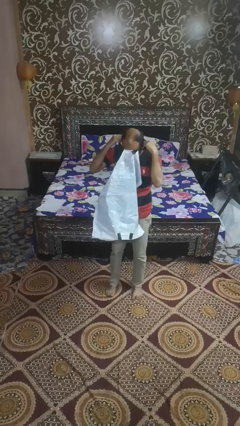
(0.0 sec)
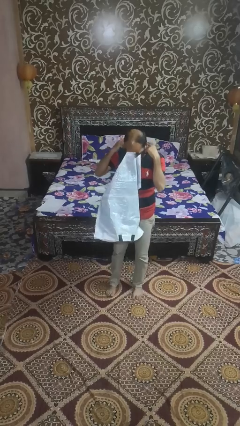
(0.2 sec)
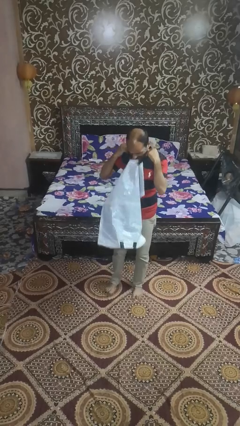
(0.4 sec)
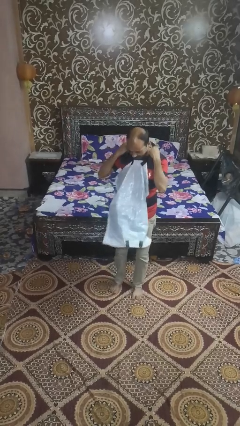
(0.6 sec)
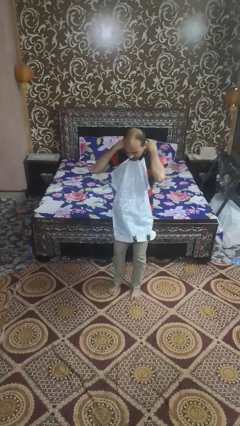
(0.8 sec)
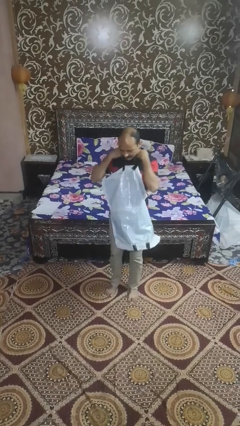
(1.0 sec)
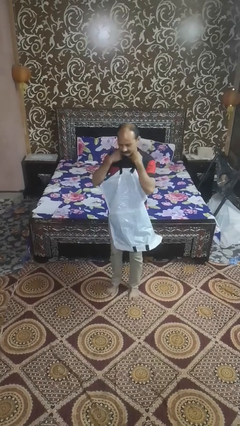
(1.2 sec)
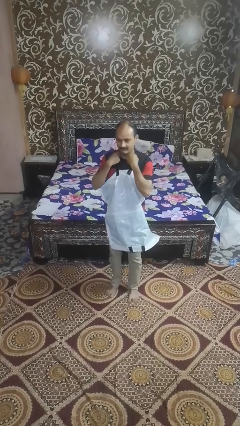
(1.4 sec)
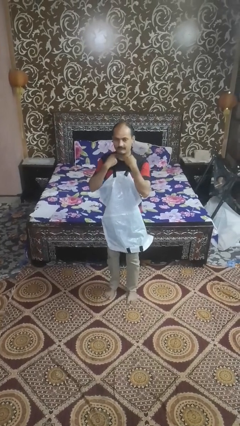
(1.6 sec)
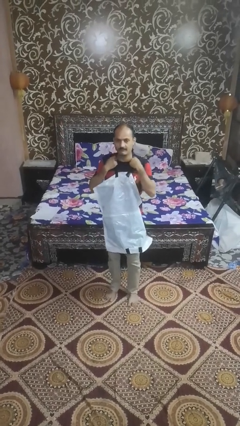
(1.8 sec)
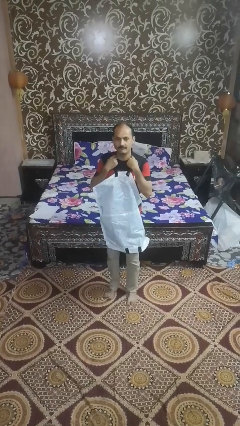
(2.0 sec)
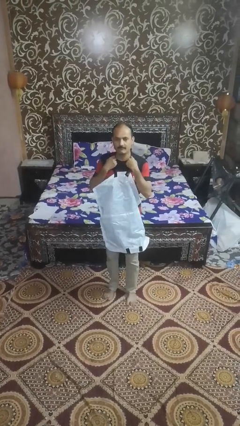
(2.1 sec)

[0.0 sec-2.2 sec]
person tears paper

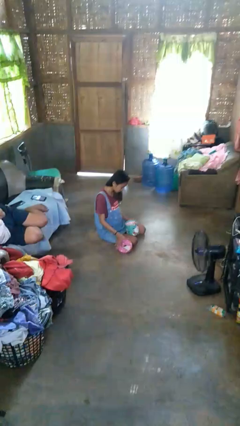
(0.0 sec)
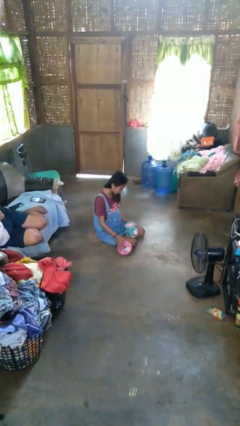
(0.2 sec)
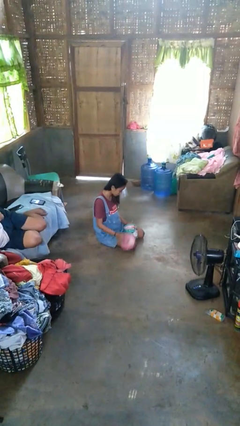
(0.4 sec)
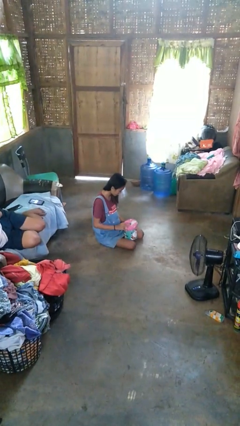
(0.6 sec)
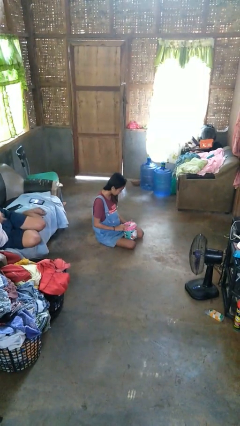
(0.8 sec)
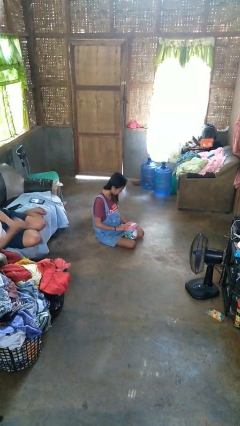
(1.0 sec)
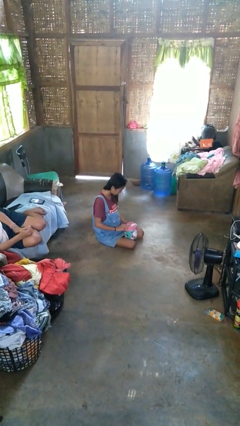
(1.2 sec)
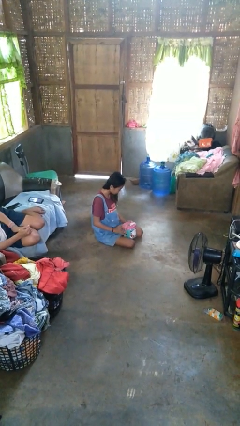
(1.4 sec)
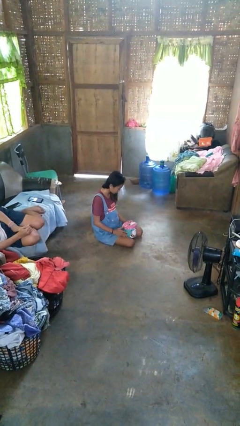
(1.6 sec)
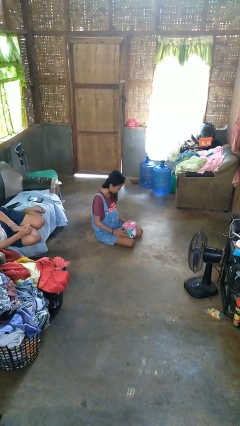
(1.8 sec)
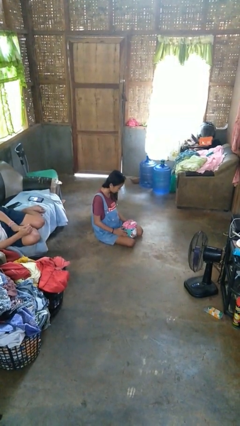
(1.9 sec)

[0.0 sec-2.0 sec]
person closes jewelry box

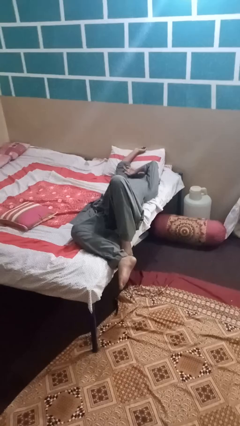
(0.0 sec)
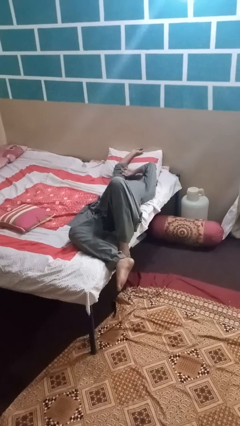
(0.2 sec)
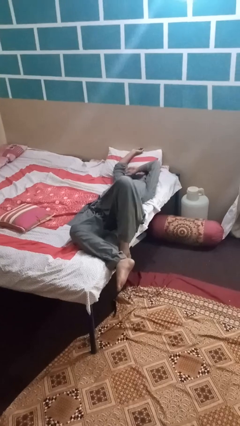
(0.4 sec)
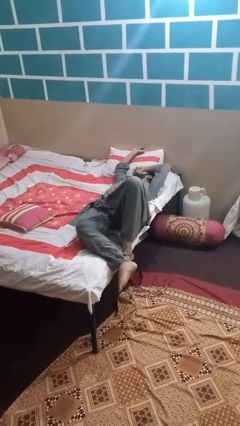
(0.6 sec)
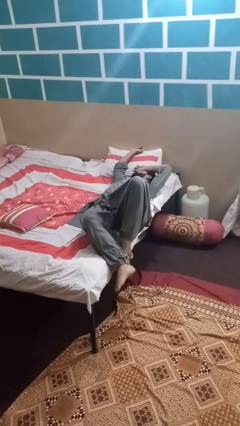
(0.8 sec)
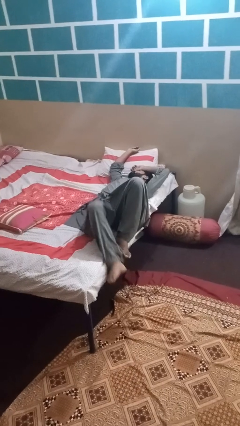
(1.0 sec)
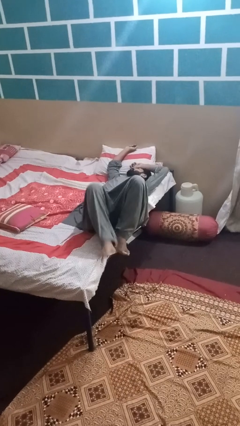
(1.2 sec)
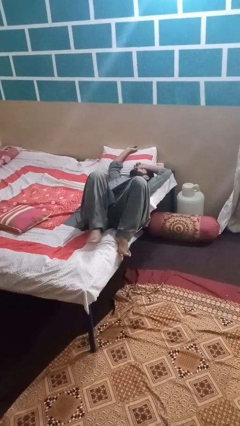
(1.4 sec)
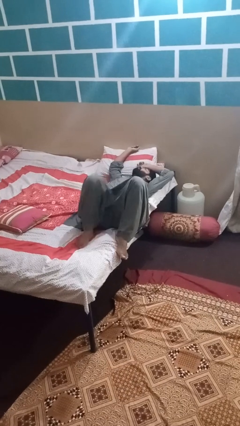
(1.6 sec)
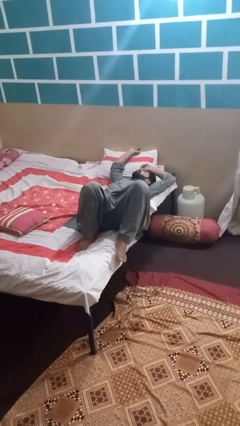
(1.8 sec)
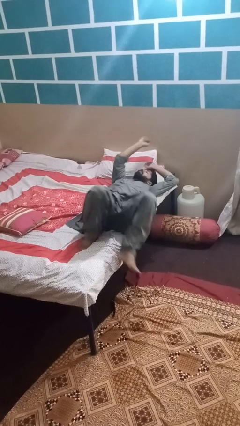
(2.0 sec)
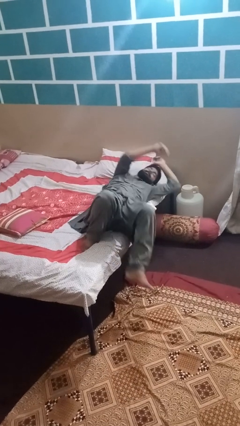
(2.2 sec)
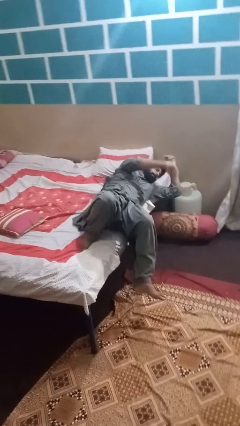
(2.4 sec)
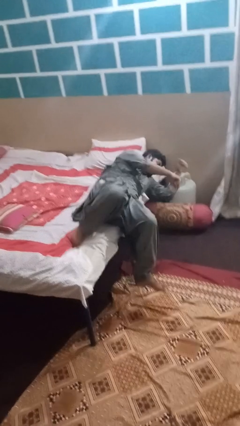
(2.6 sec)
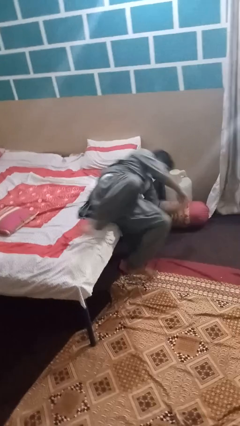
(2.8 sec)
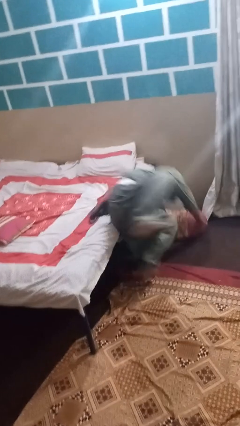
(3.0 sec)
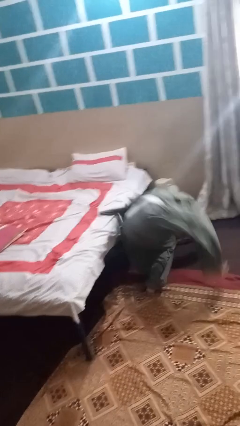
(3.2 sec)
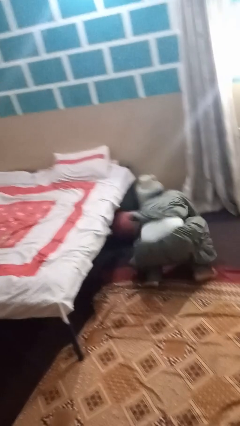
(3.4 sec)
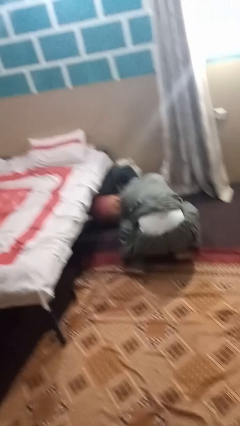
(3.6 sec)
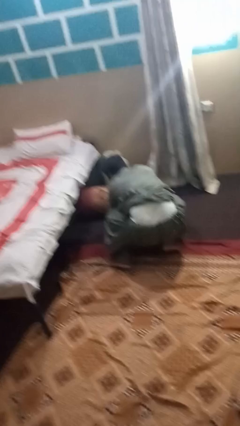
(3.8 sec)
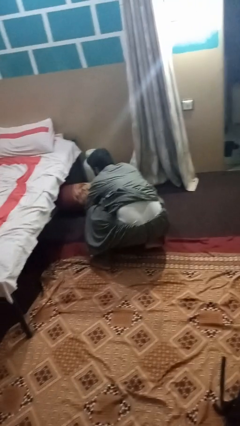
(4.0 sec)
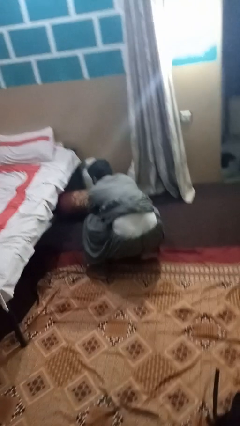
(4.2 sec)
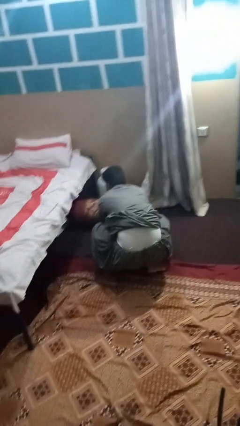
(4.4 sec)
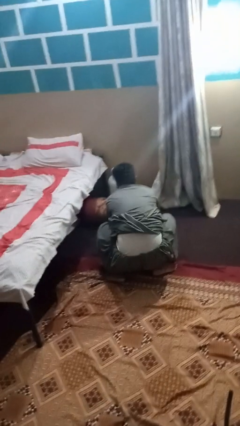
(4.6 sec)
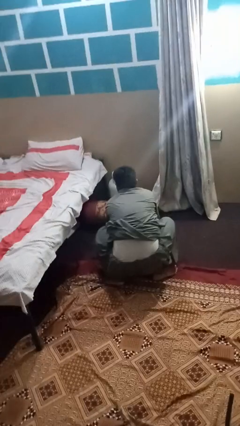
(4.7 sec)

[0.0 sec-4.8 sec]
person falls from bed

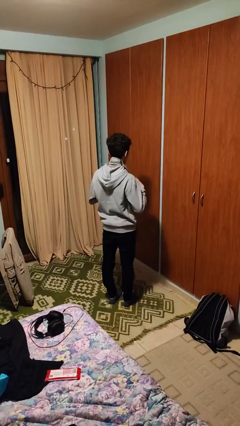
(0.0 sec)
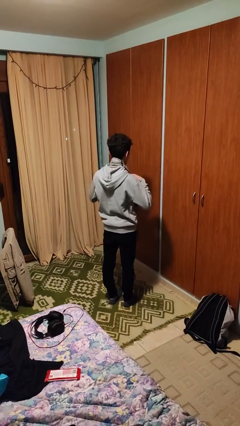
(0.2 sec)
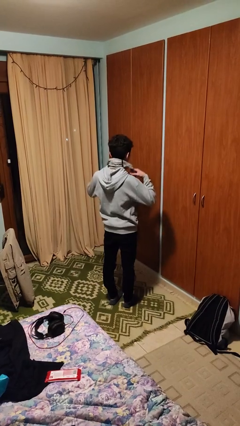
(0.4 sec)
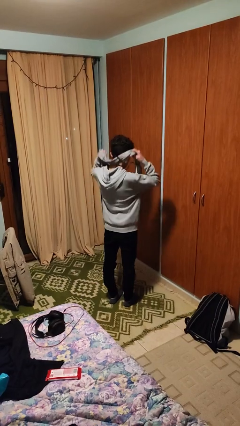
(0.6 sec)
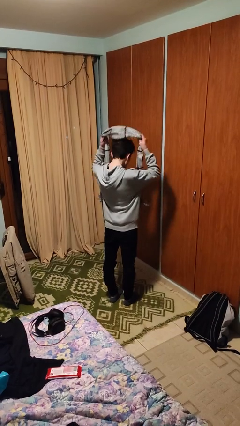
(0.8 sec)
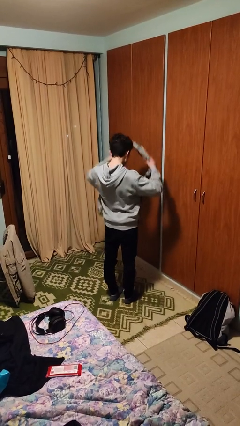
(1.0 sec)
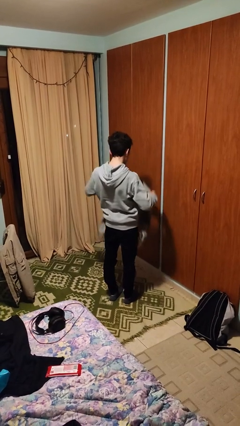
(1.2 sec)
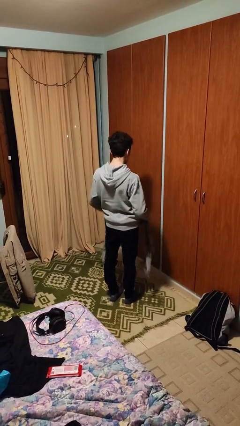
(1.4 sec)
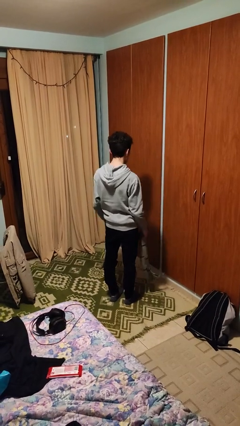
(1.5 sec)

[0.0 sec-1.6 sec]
person takes off scarf

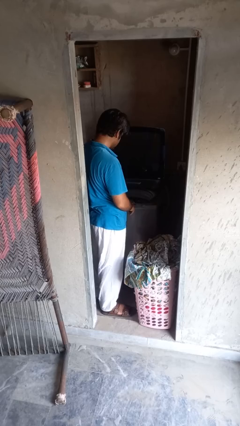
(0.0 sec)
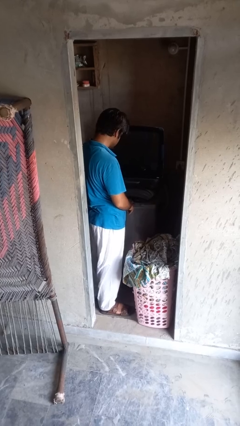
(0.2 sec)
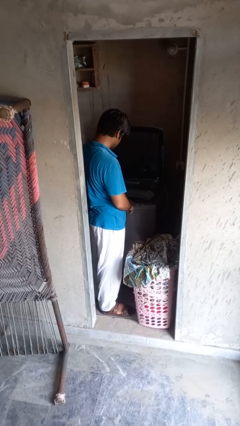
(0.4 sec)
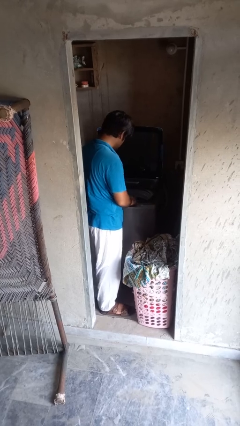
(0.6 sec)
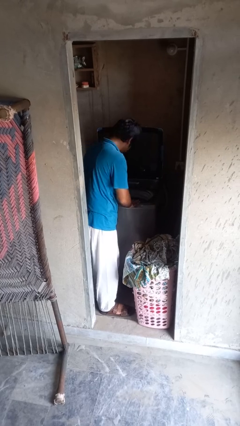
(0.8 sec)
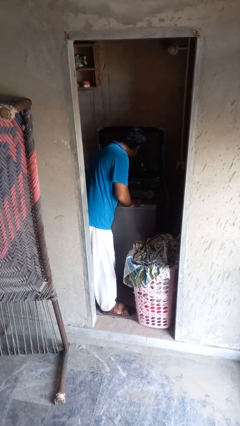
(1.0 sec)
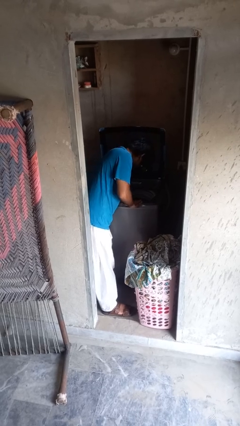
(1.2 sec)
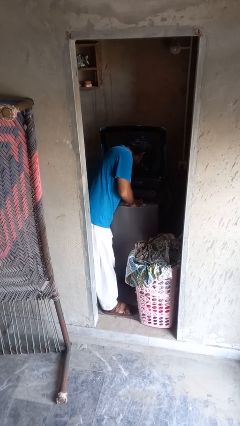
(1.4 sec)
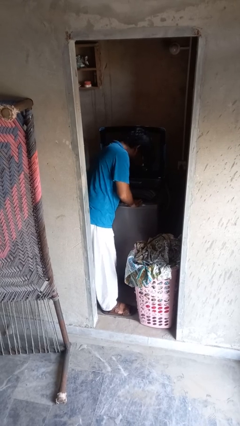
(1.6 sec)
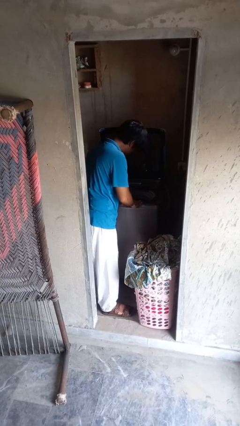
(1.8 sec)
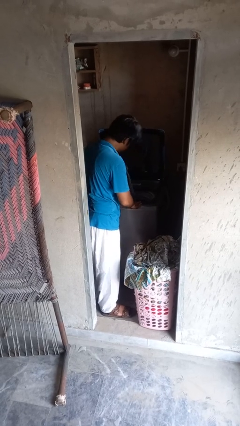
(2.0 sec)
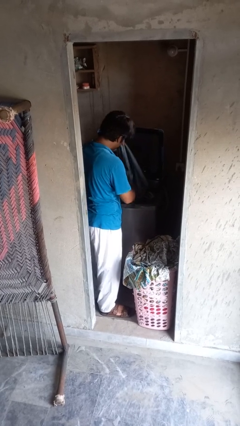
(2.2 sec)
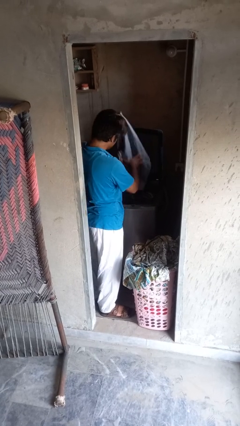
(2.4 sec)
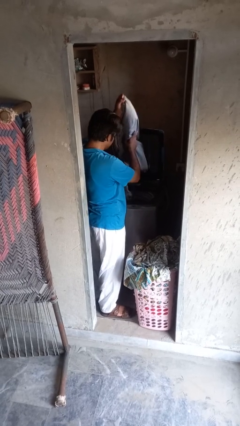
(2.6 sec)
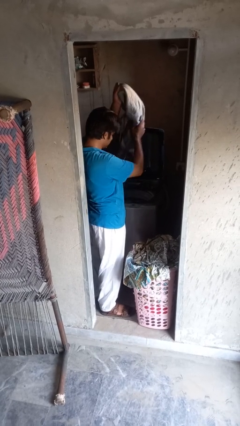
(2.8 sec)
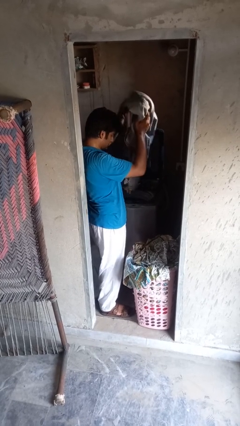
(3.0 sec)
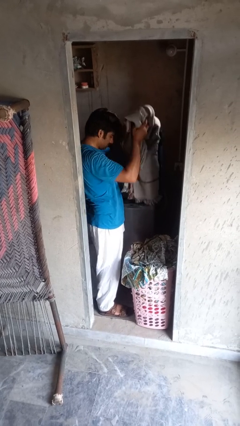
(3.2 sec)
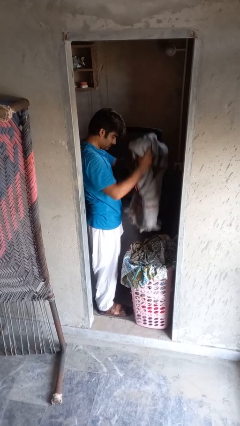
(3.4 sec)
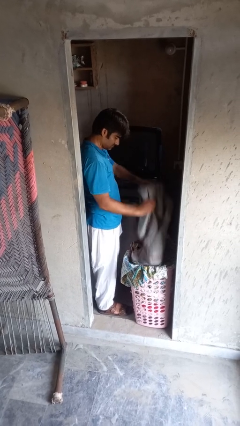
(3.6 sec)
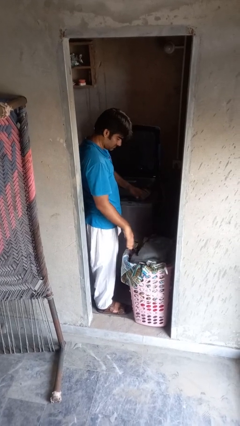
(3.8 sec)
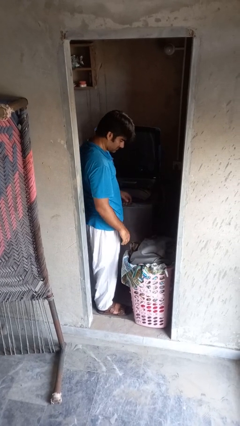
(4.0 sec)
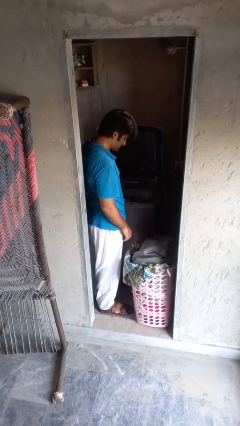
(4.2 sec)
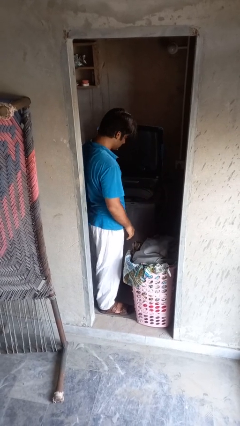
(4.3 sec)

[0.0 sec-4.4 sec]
person loads clotheswasher

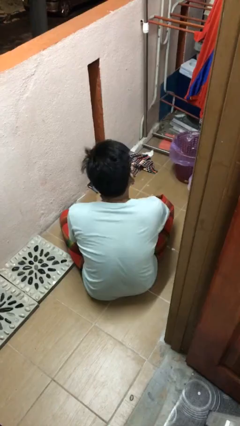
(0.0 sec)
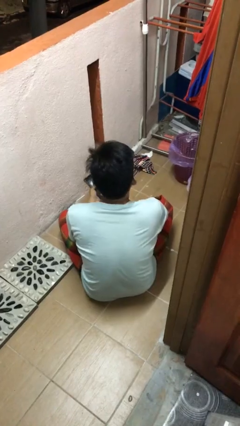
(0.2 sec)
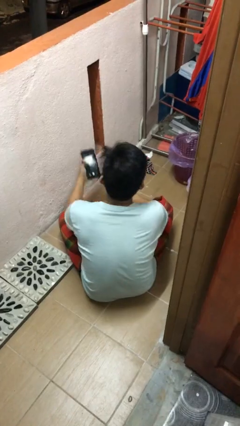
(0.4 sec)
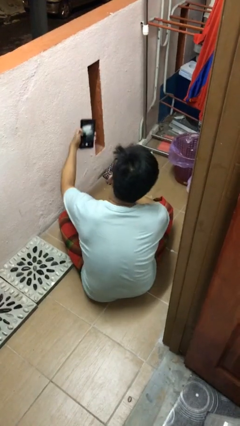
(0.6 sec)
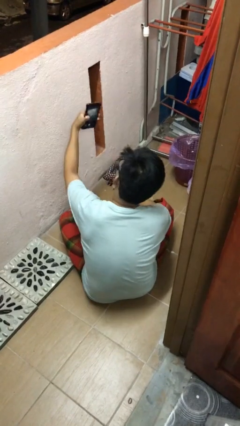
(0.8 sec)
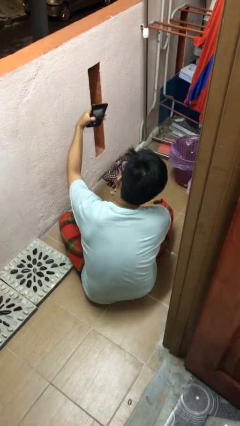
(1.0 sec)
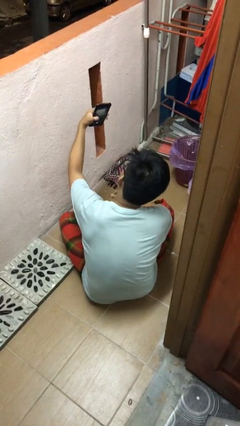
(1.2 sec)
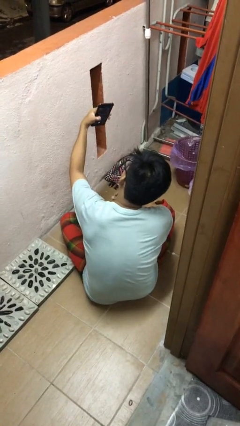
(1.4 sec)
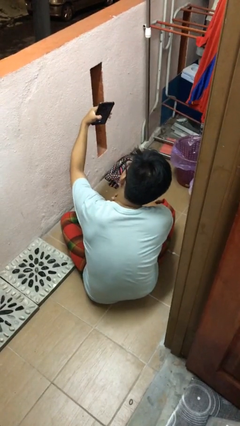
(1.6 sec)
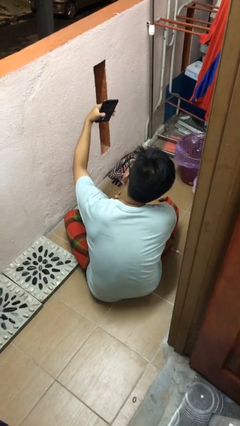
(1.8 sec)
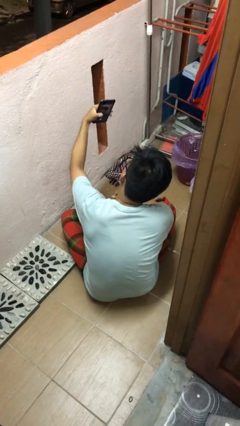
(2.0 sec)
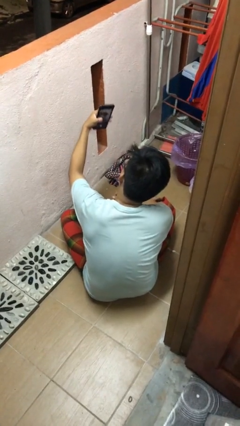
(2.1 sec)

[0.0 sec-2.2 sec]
person takes selfie

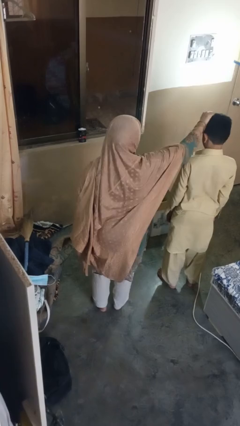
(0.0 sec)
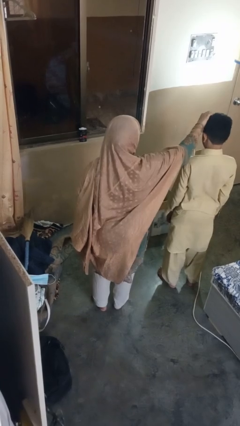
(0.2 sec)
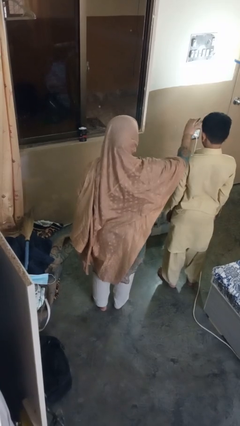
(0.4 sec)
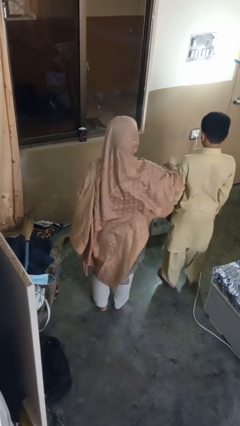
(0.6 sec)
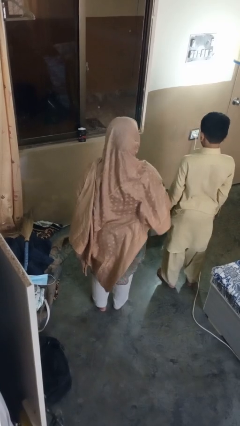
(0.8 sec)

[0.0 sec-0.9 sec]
person grabs person by hair
